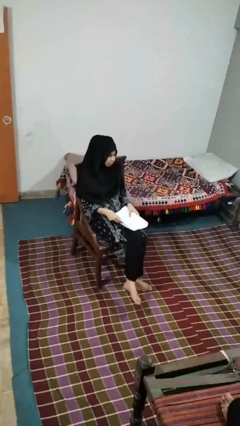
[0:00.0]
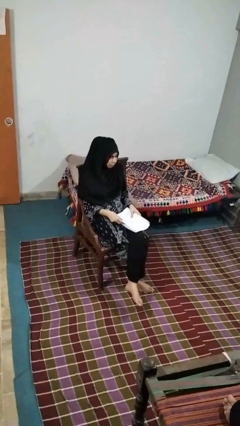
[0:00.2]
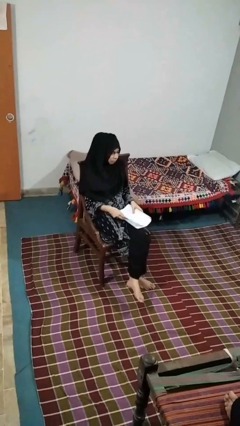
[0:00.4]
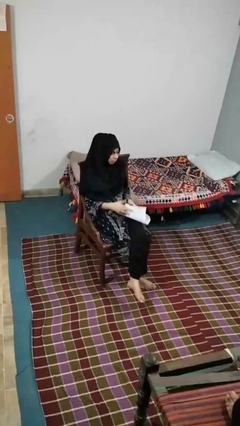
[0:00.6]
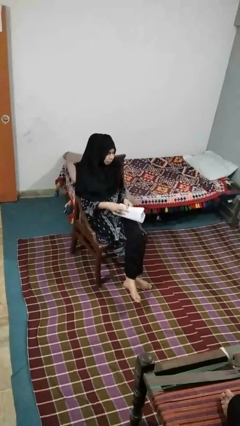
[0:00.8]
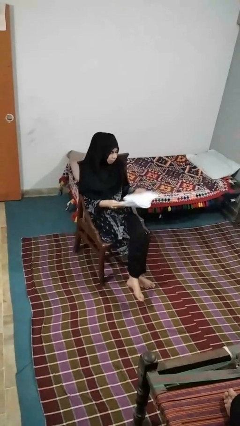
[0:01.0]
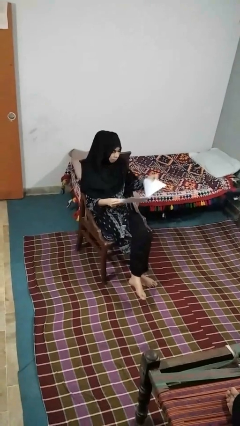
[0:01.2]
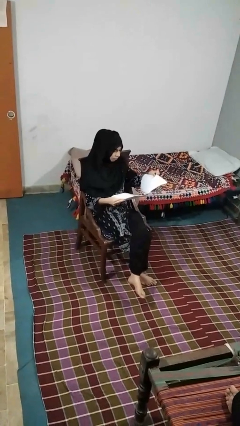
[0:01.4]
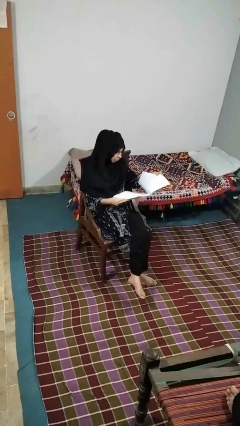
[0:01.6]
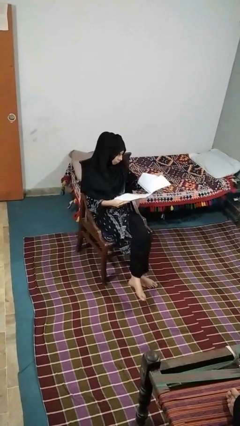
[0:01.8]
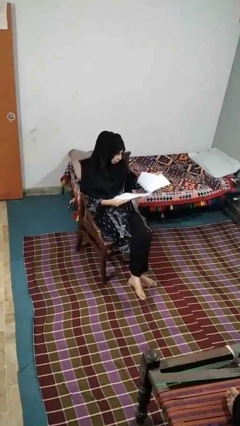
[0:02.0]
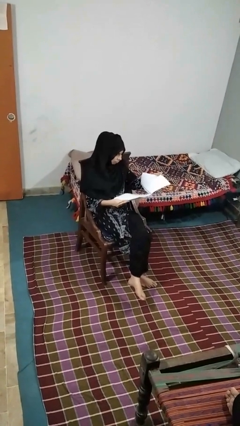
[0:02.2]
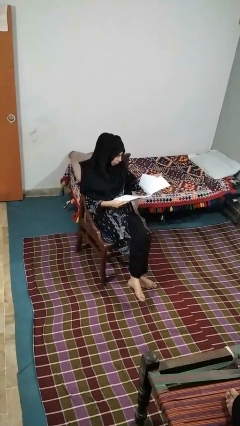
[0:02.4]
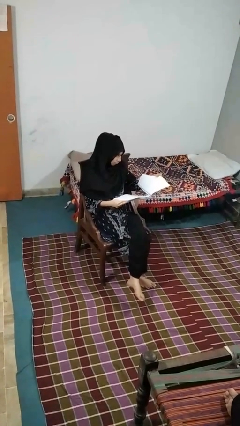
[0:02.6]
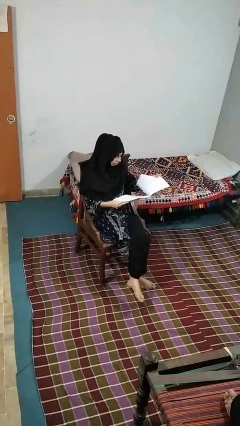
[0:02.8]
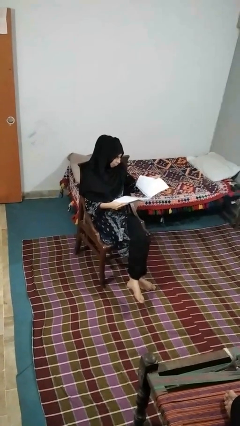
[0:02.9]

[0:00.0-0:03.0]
person reads newspaper

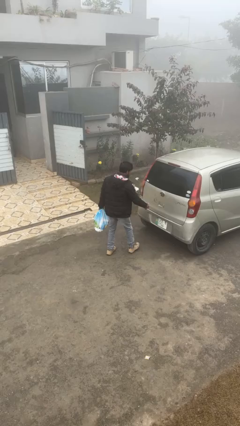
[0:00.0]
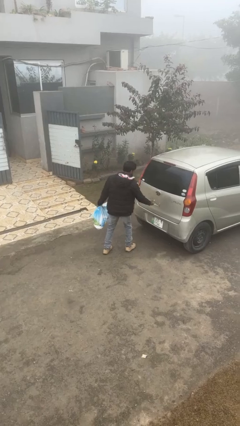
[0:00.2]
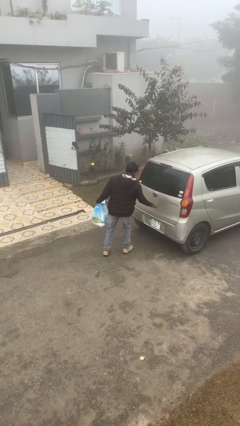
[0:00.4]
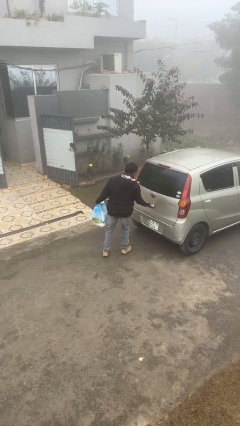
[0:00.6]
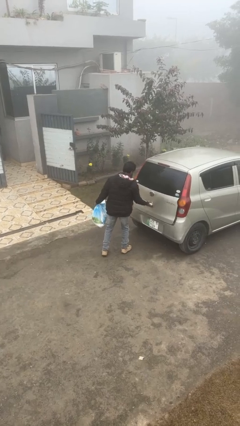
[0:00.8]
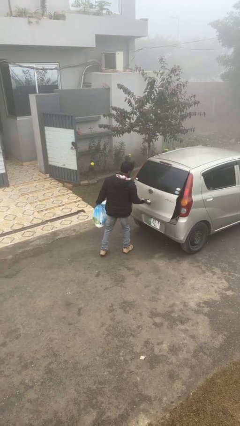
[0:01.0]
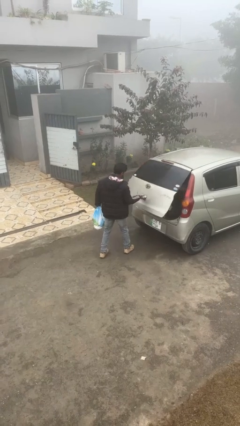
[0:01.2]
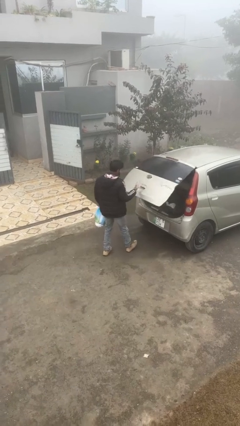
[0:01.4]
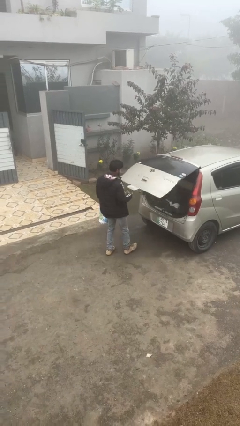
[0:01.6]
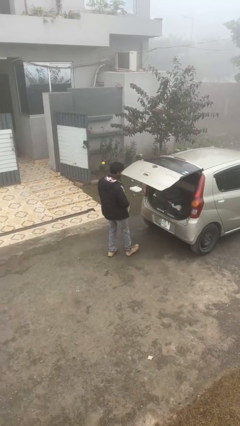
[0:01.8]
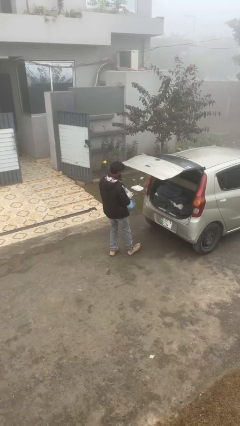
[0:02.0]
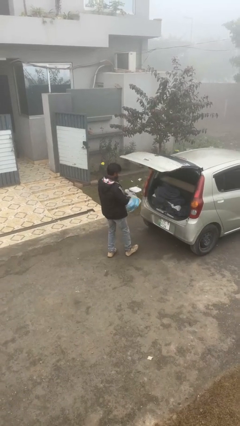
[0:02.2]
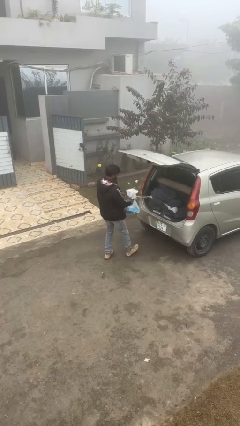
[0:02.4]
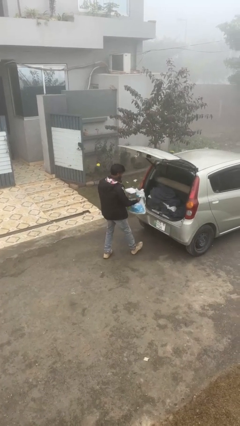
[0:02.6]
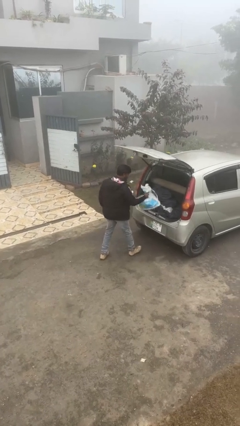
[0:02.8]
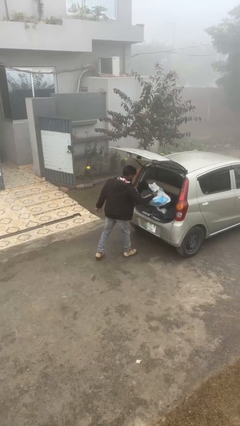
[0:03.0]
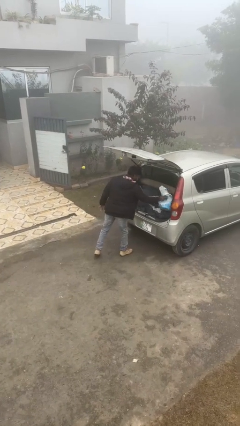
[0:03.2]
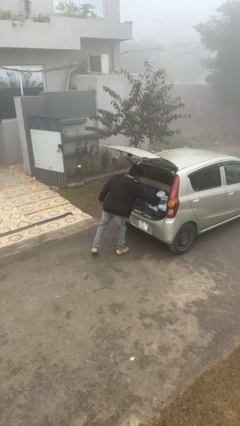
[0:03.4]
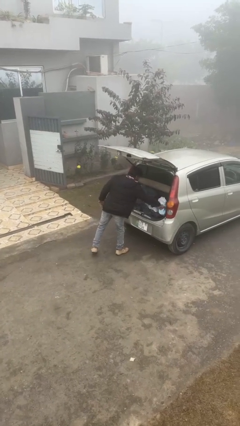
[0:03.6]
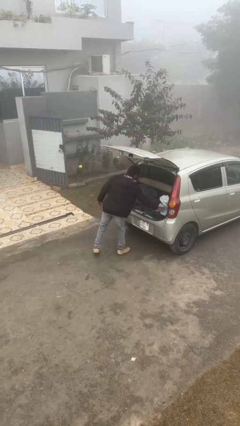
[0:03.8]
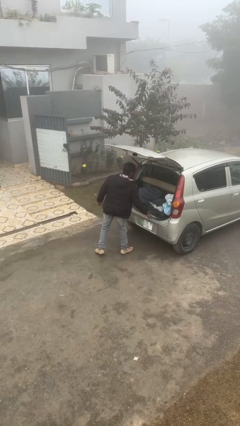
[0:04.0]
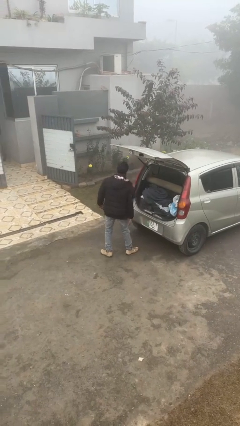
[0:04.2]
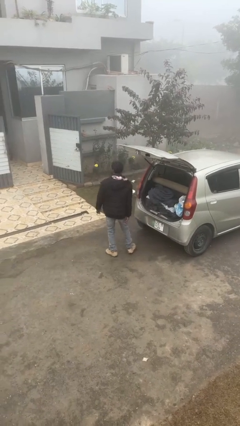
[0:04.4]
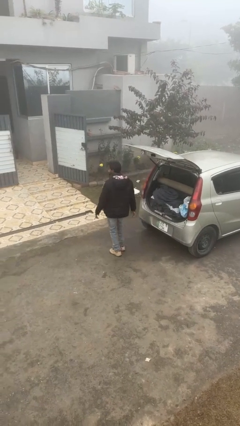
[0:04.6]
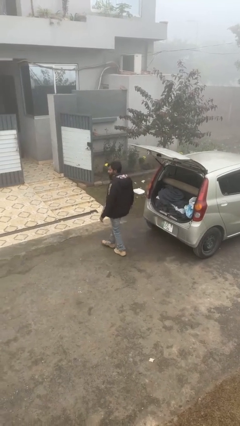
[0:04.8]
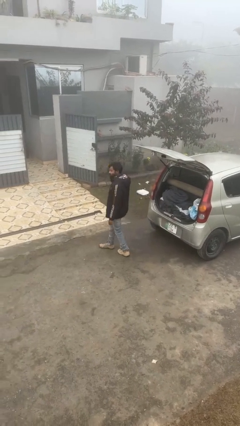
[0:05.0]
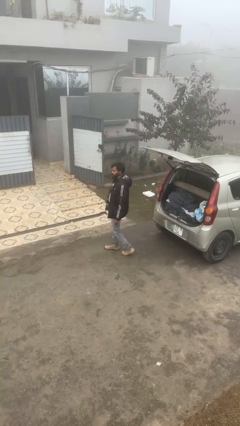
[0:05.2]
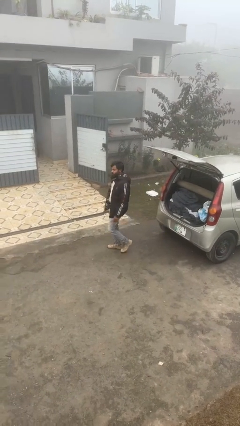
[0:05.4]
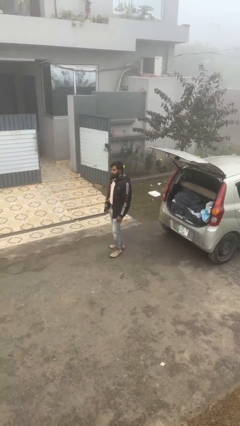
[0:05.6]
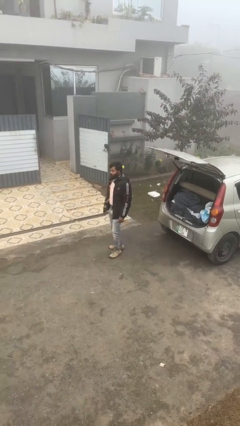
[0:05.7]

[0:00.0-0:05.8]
person loads car

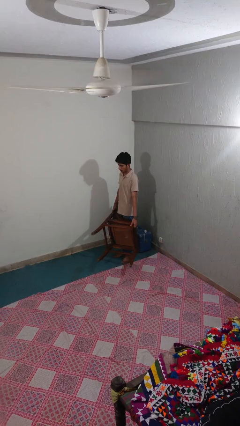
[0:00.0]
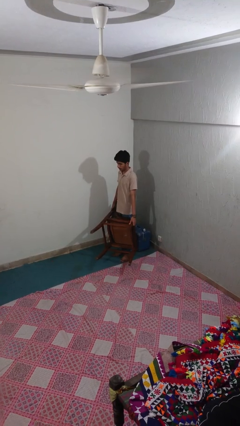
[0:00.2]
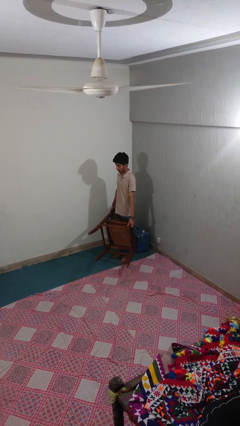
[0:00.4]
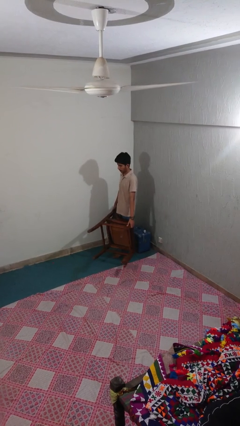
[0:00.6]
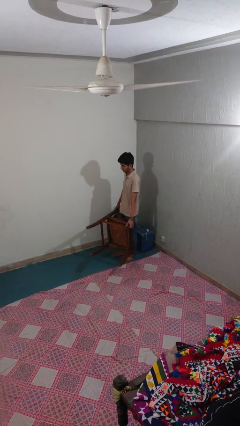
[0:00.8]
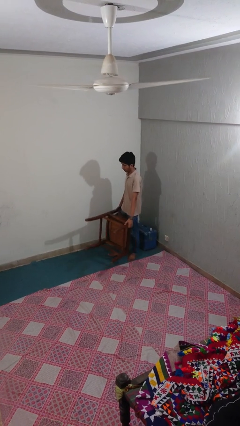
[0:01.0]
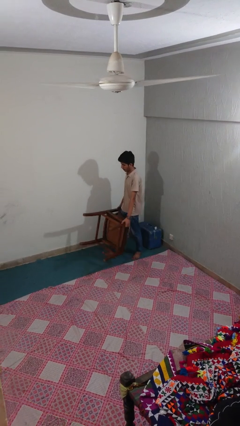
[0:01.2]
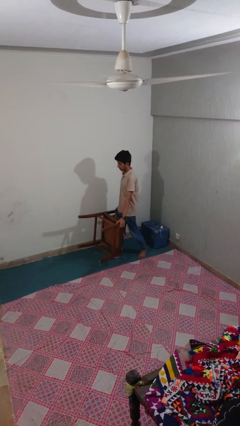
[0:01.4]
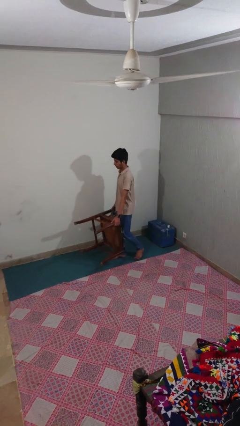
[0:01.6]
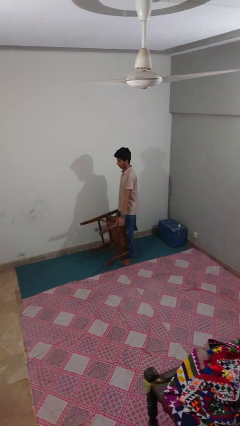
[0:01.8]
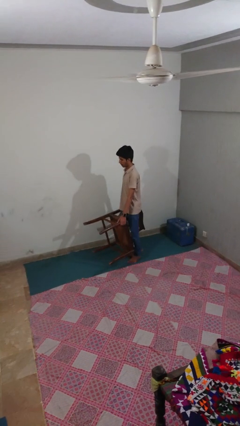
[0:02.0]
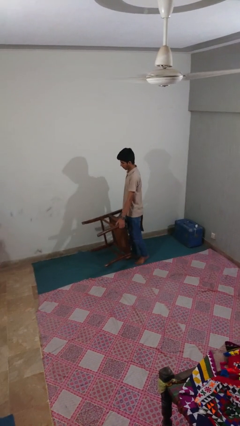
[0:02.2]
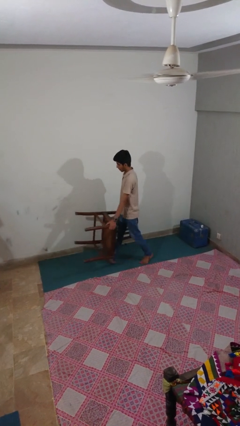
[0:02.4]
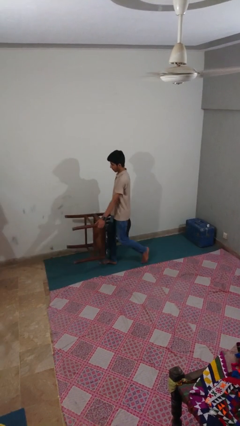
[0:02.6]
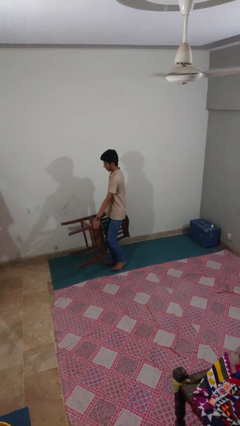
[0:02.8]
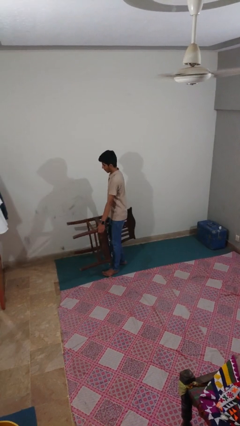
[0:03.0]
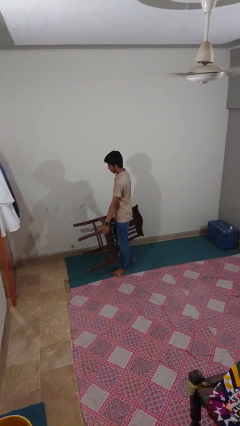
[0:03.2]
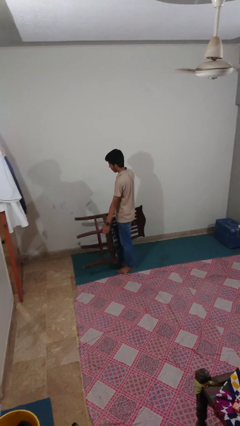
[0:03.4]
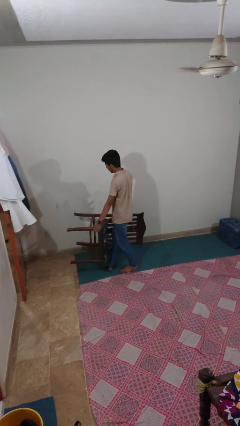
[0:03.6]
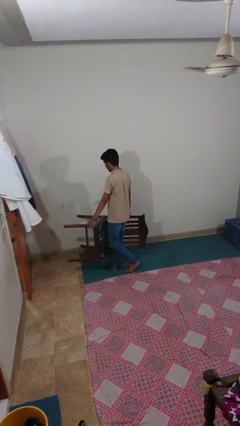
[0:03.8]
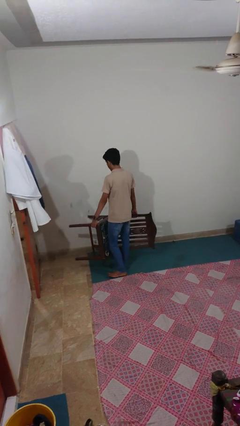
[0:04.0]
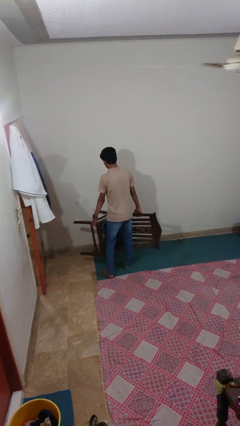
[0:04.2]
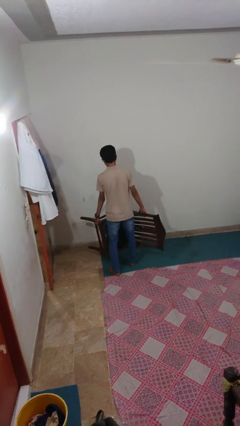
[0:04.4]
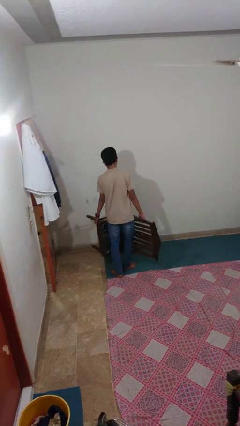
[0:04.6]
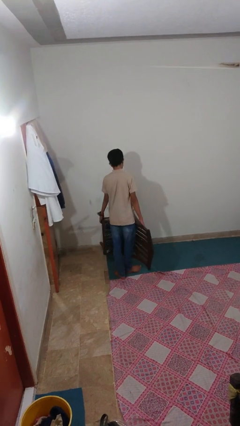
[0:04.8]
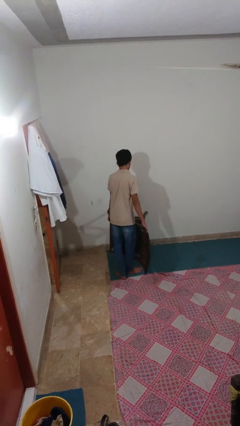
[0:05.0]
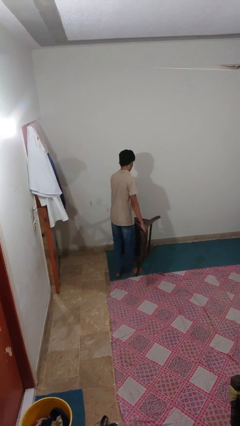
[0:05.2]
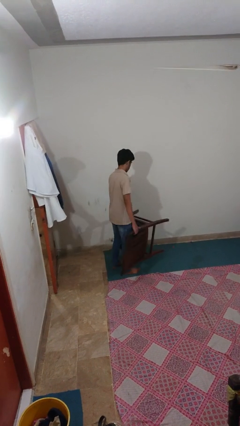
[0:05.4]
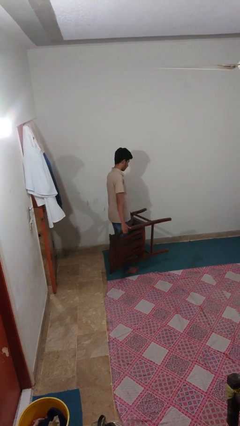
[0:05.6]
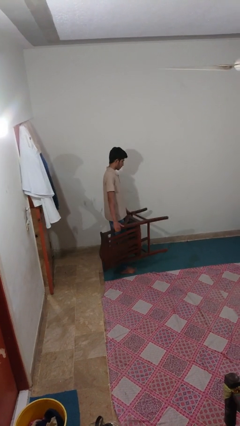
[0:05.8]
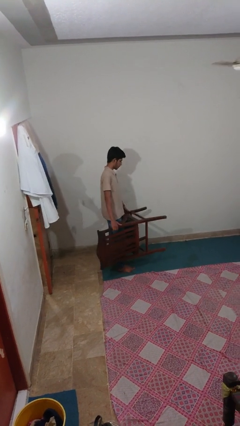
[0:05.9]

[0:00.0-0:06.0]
person carries furniture

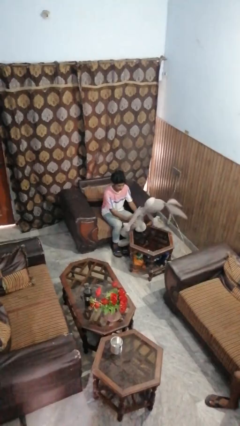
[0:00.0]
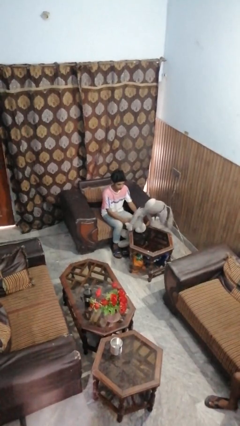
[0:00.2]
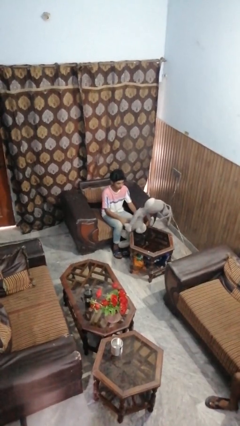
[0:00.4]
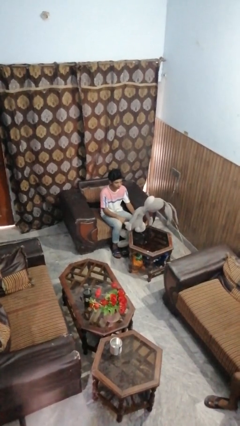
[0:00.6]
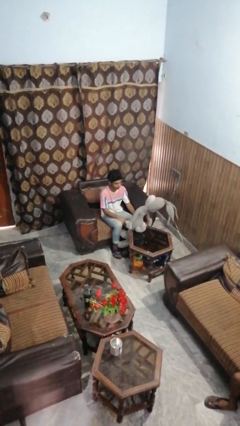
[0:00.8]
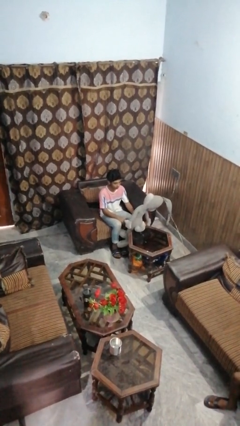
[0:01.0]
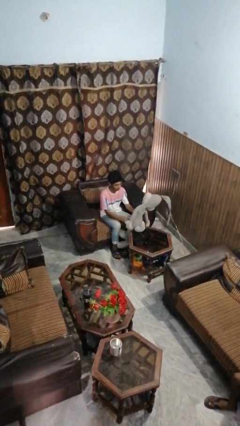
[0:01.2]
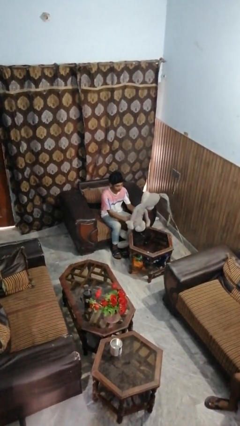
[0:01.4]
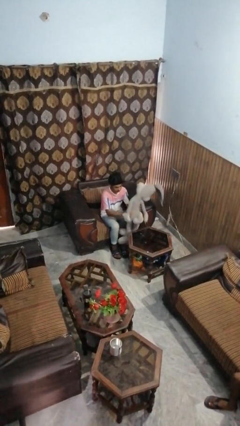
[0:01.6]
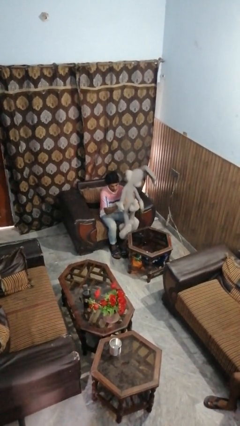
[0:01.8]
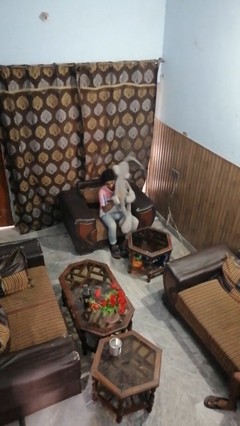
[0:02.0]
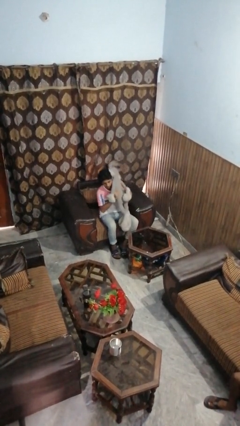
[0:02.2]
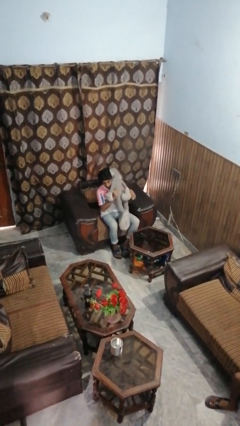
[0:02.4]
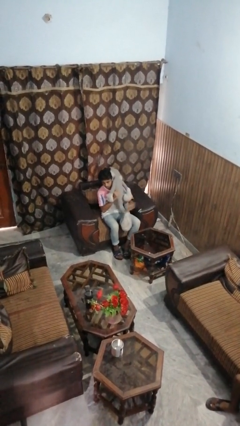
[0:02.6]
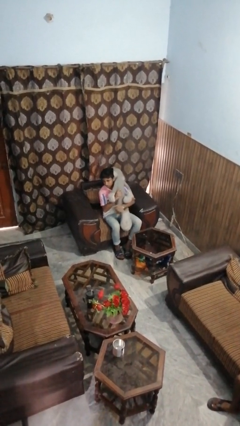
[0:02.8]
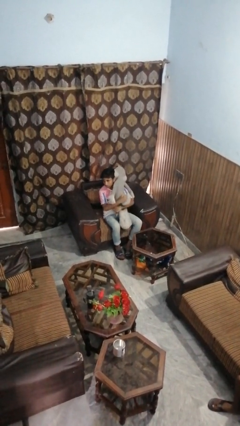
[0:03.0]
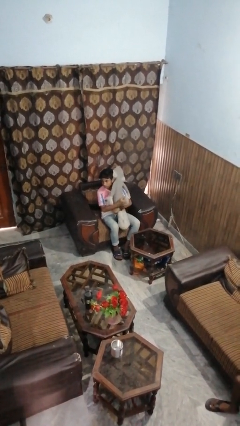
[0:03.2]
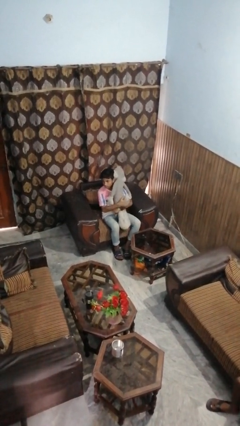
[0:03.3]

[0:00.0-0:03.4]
person hugs stuffed animal
